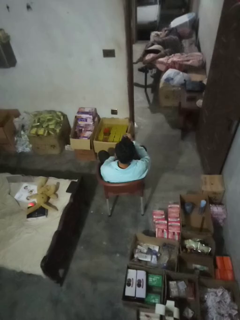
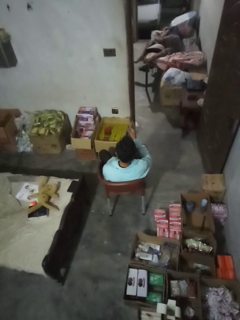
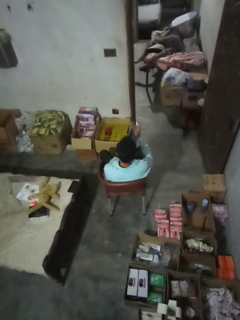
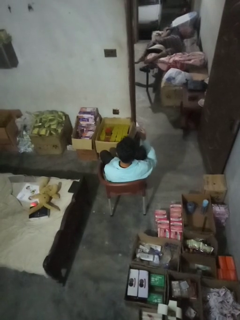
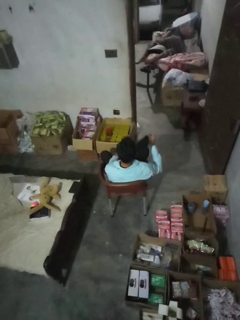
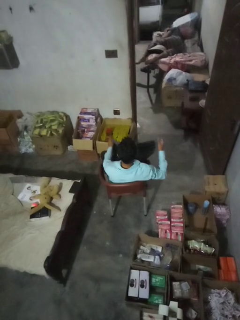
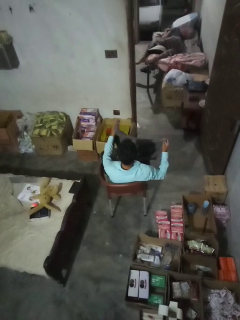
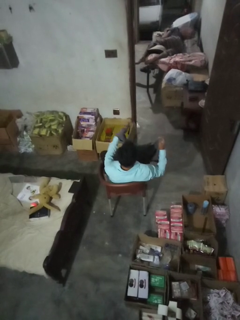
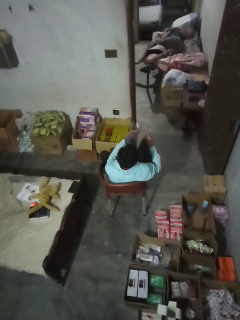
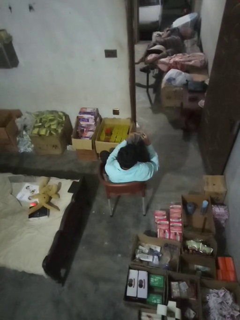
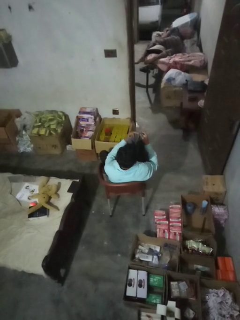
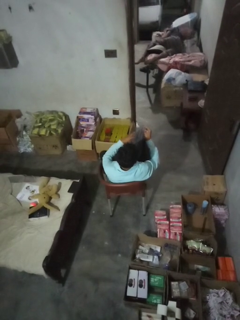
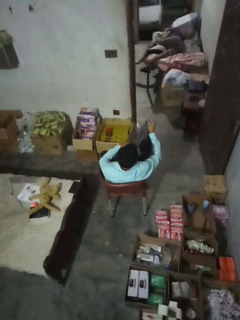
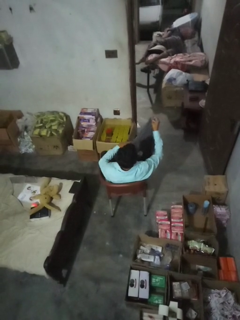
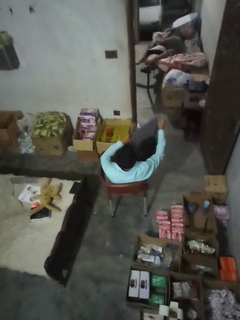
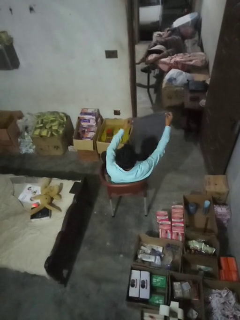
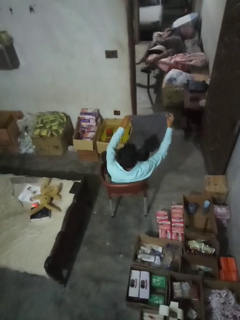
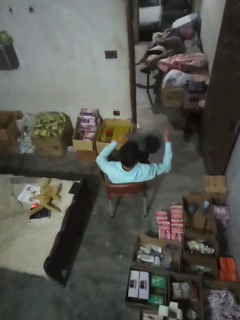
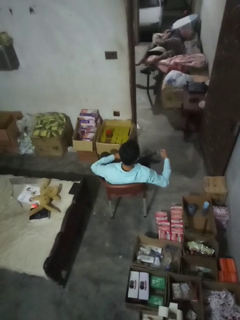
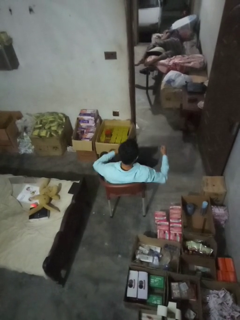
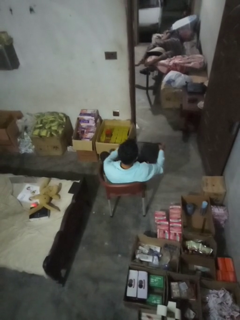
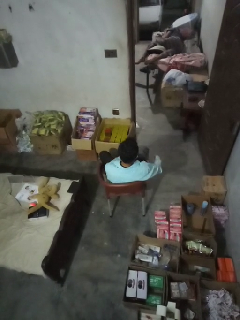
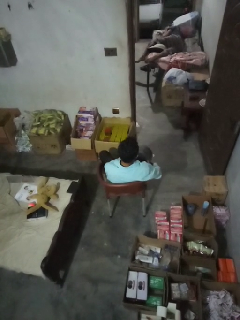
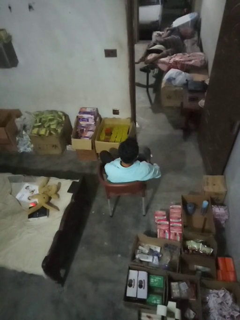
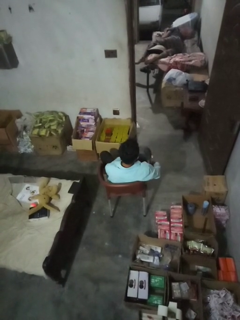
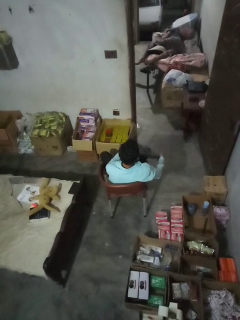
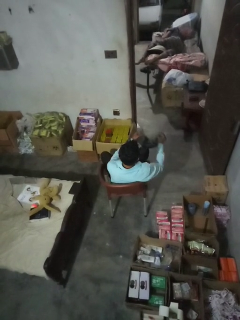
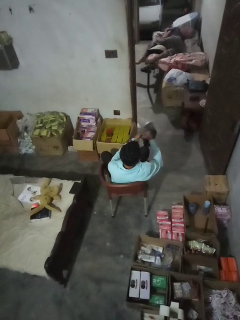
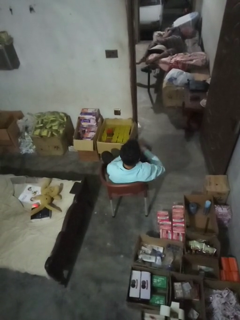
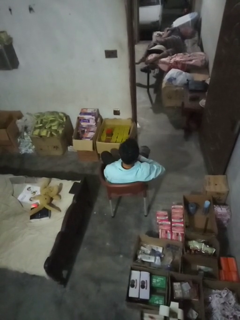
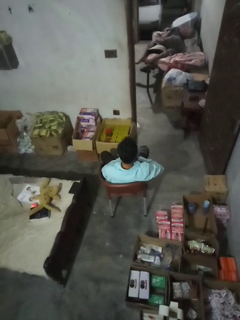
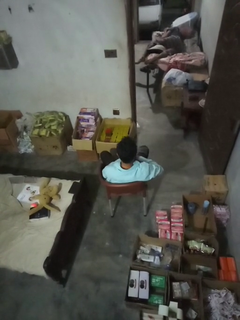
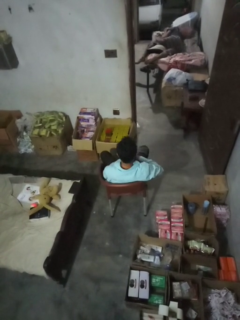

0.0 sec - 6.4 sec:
person folds towel

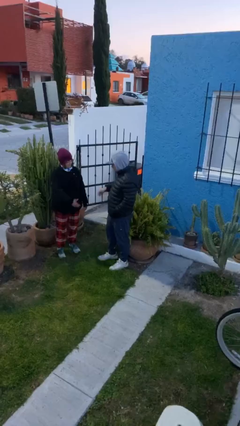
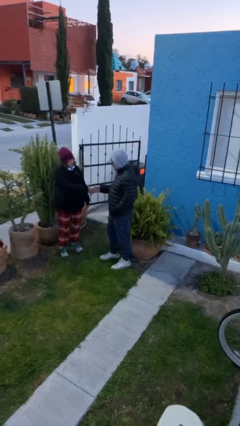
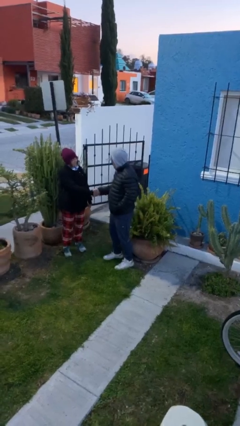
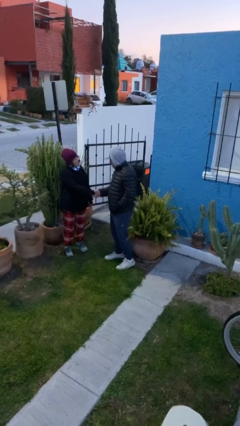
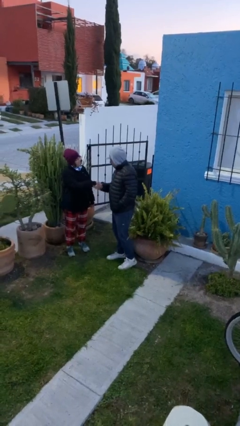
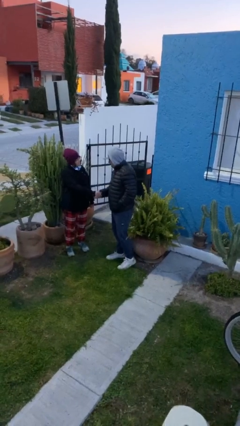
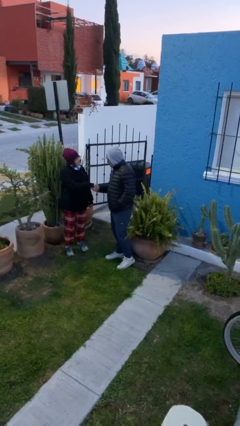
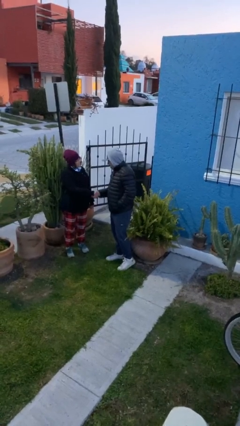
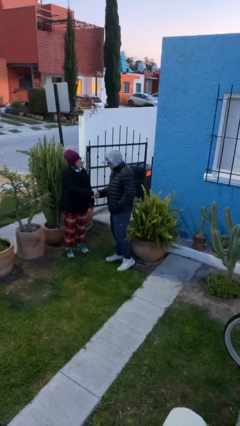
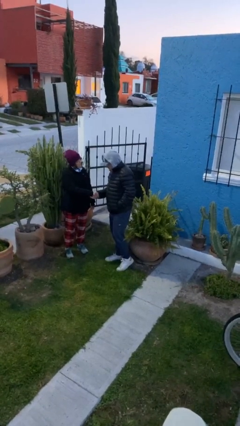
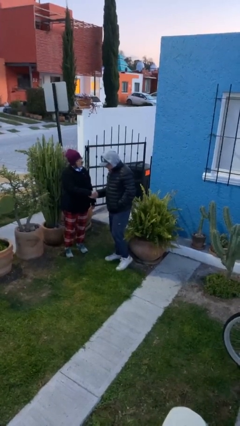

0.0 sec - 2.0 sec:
person shakes hand

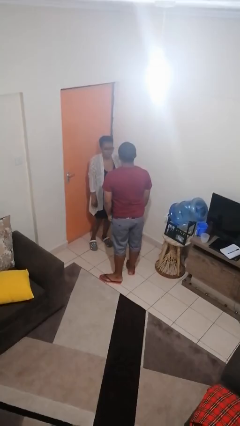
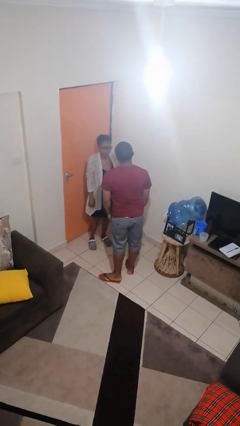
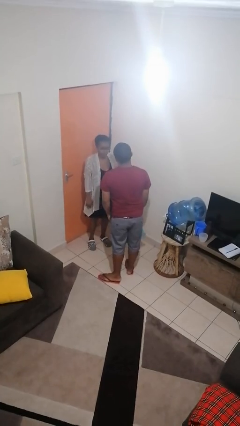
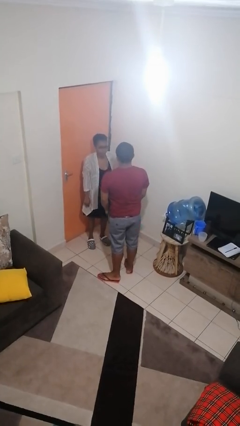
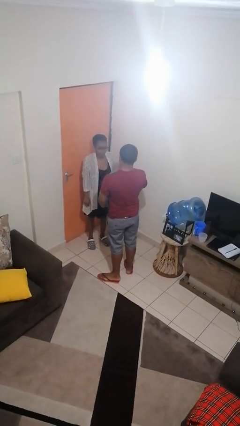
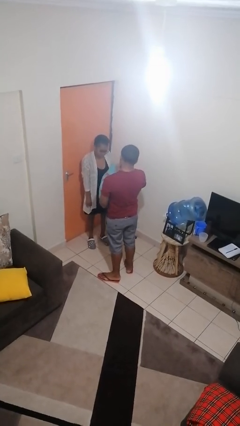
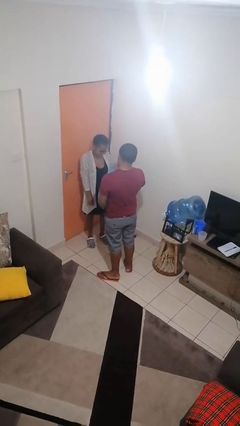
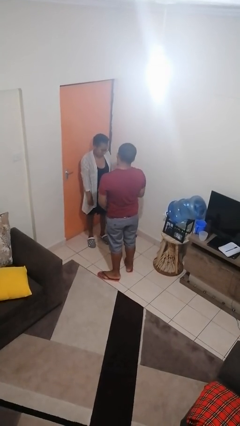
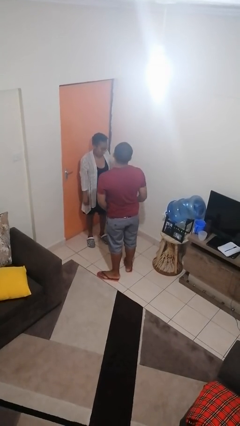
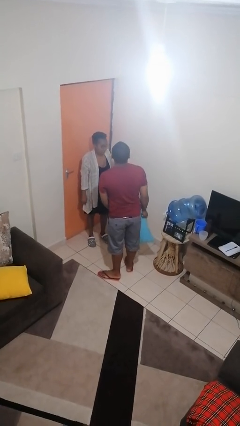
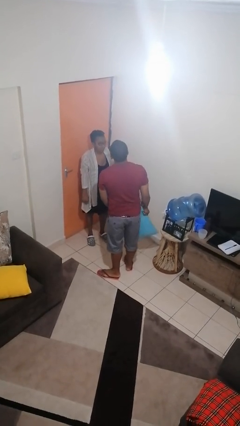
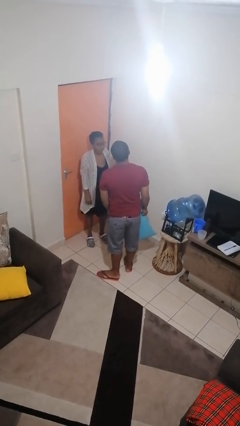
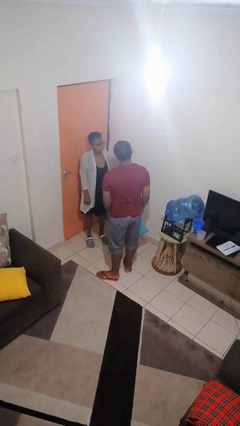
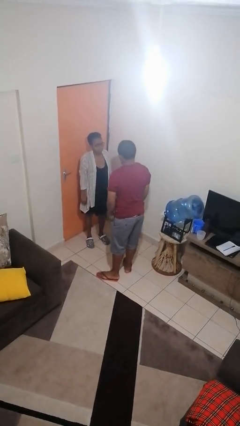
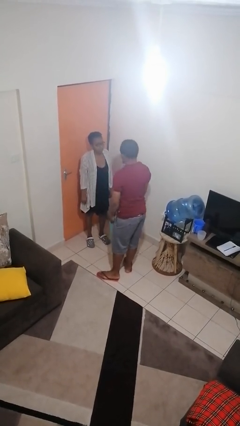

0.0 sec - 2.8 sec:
person hits person with pillow

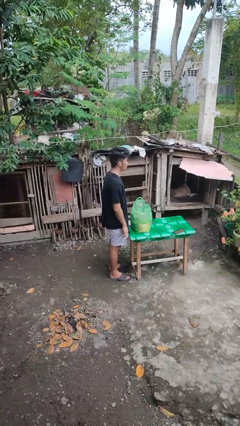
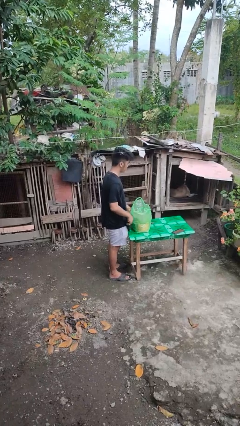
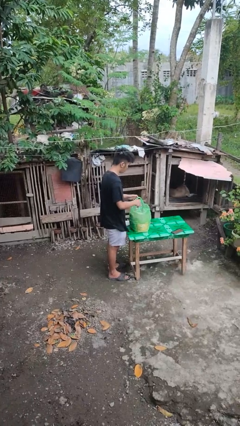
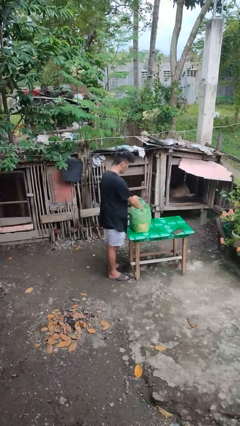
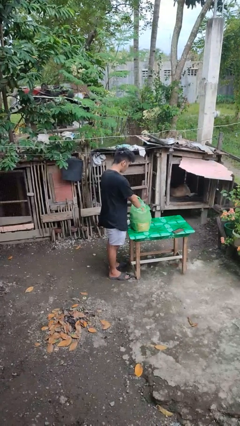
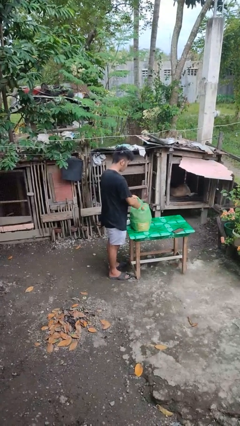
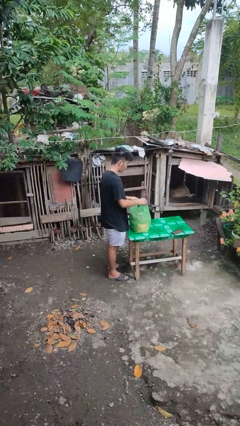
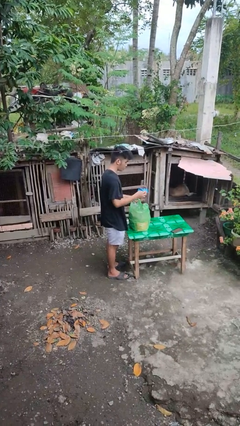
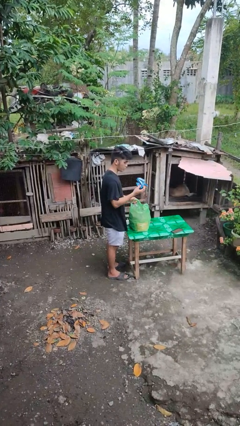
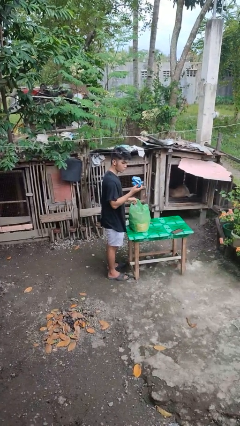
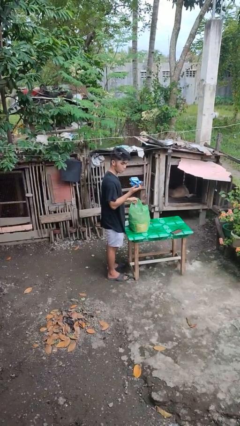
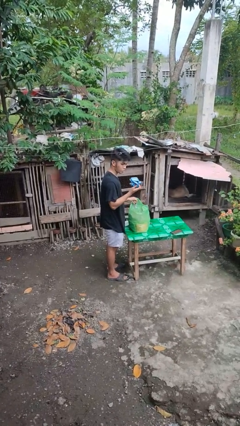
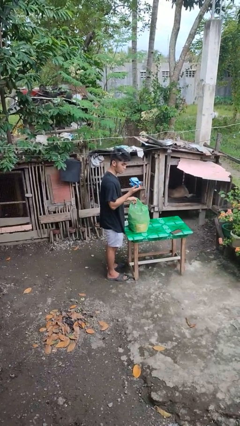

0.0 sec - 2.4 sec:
person takes object from bag

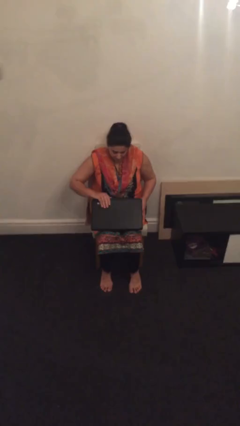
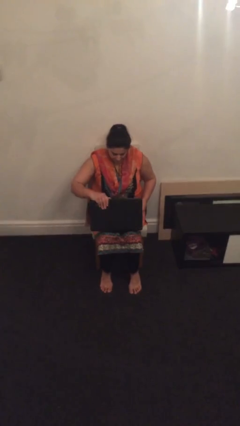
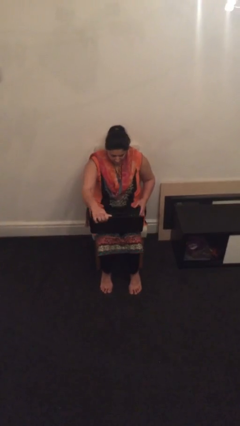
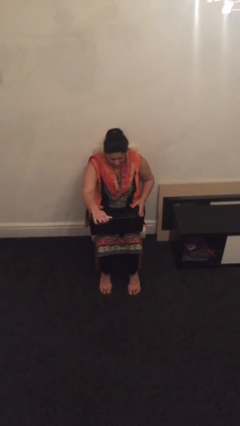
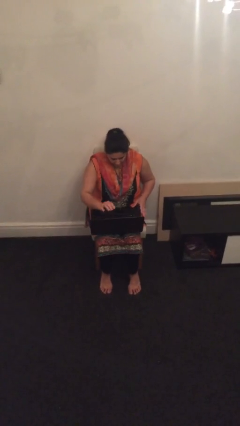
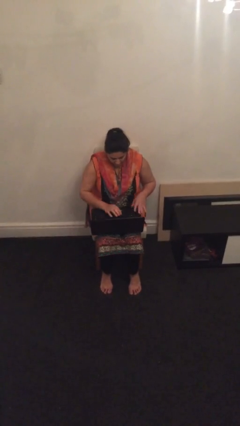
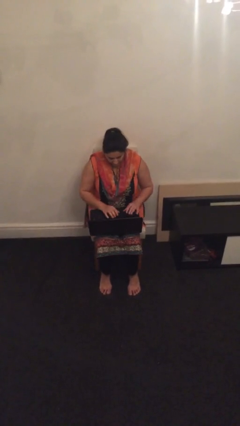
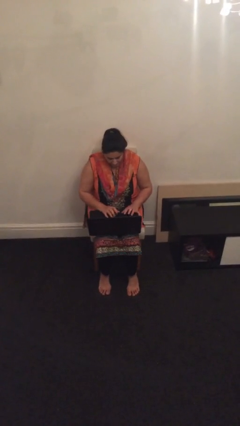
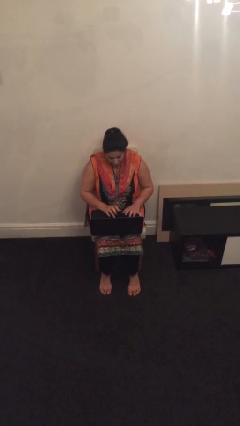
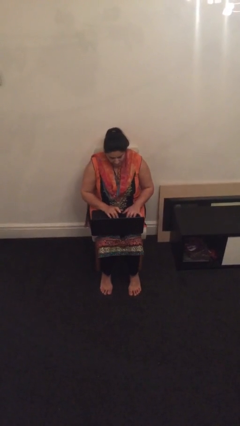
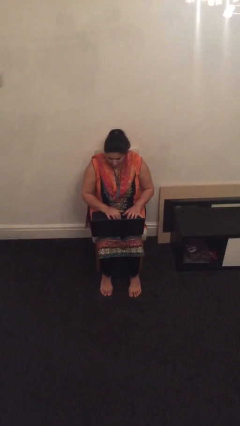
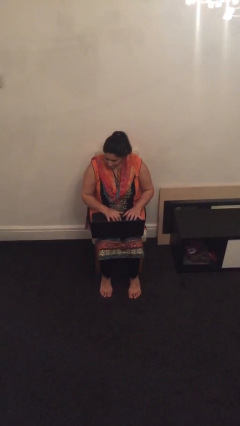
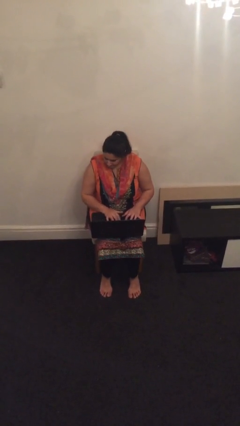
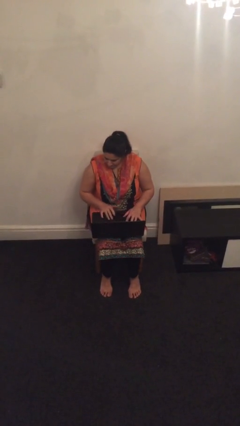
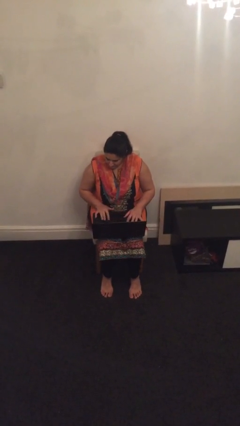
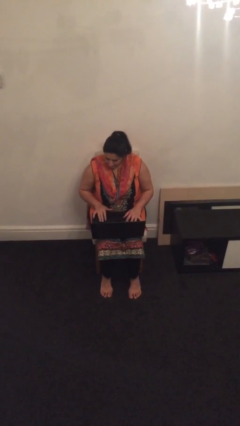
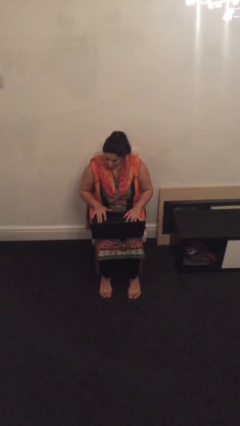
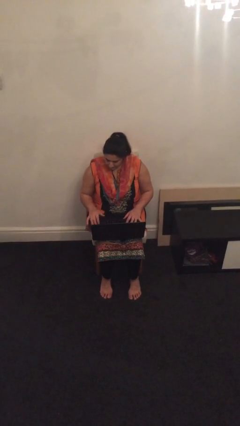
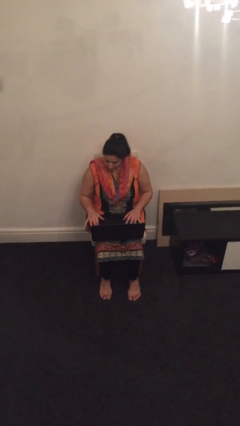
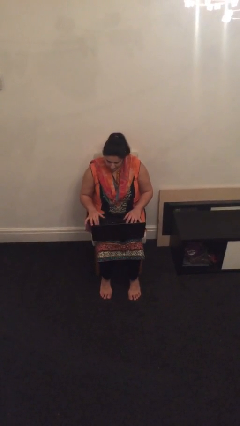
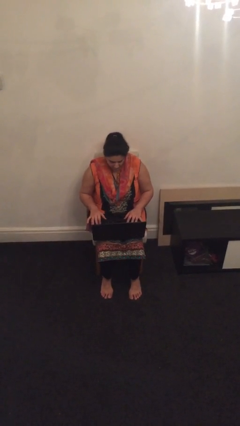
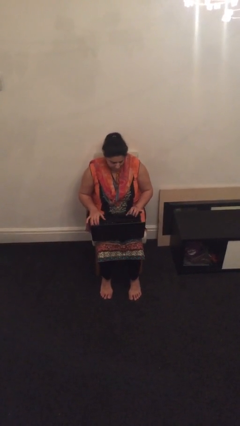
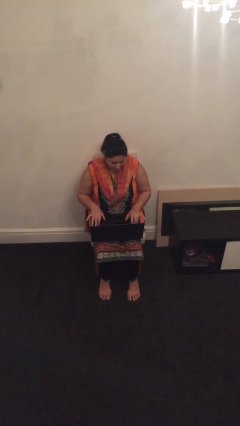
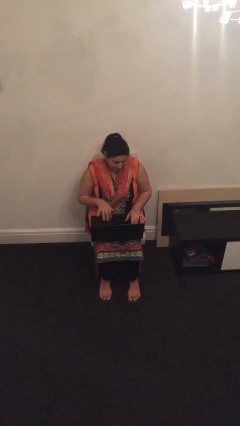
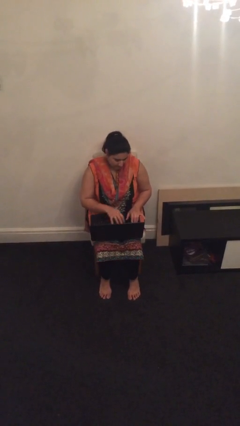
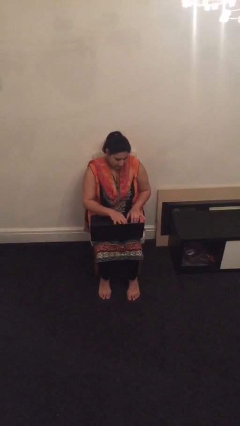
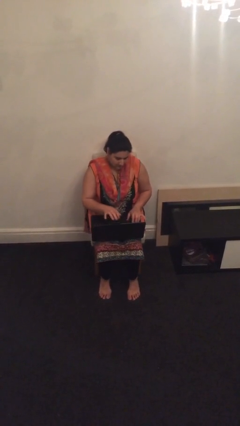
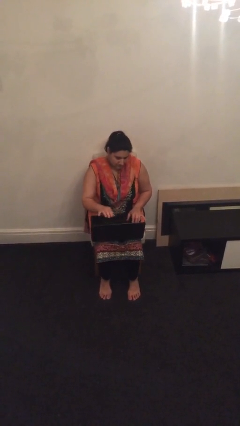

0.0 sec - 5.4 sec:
person interacts with laptop
